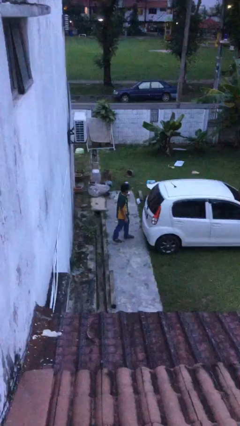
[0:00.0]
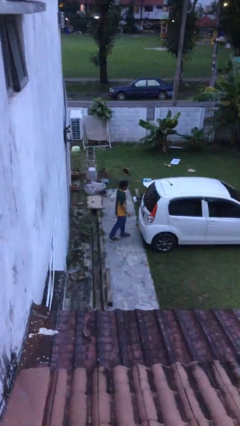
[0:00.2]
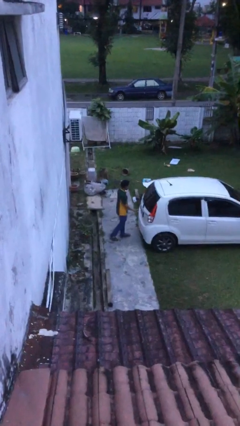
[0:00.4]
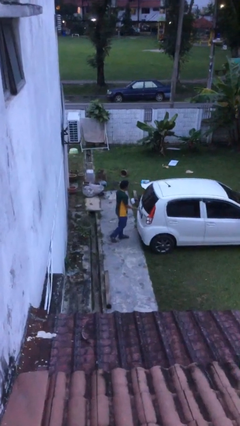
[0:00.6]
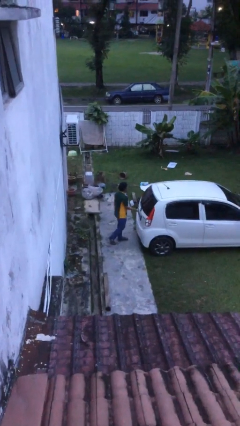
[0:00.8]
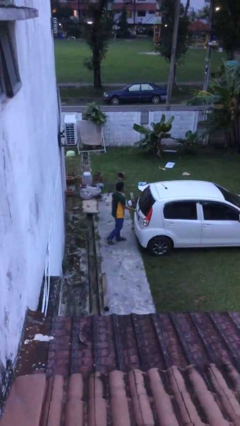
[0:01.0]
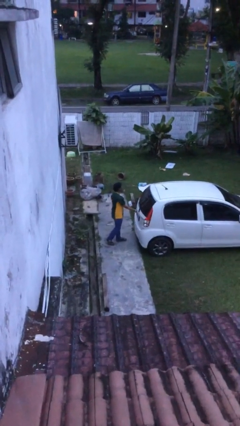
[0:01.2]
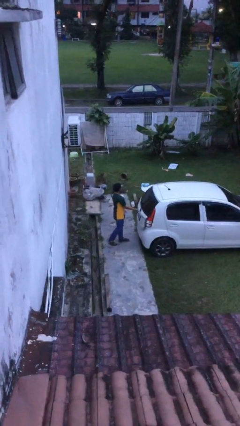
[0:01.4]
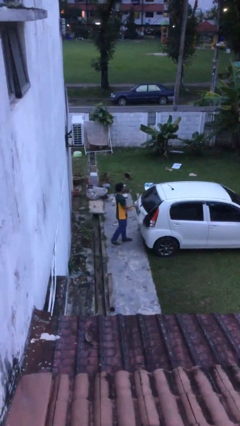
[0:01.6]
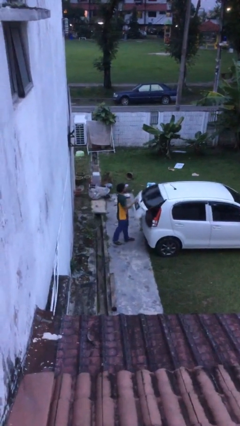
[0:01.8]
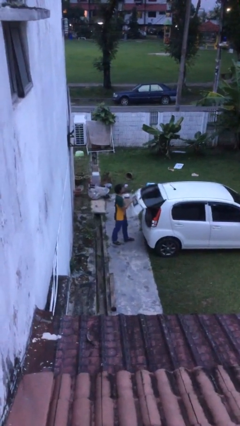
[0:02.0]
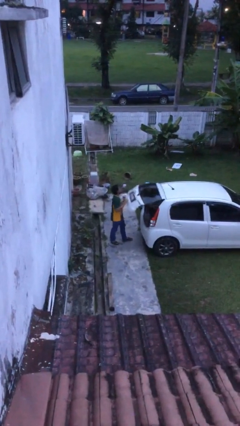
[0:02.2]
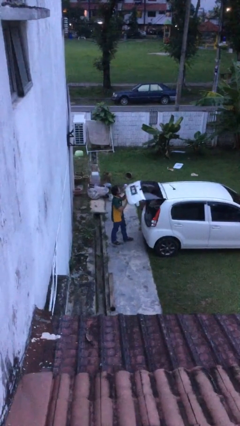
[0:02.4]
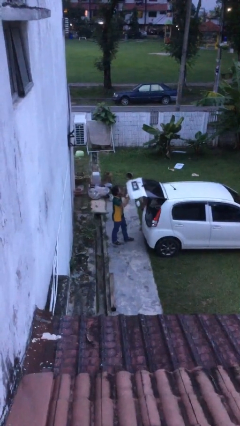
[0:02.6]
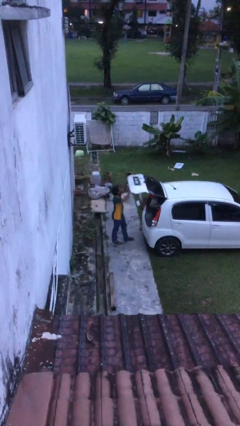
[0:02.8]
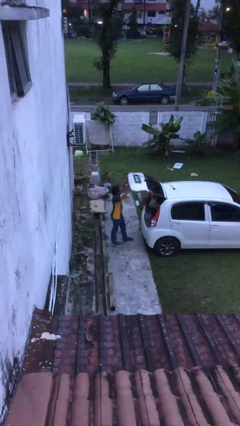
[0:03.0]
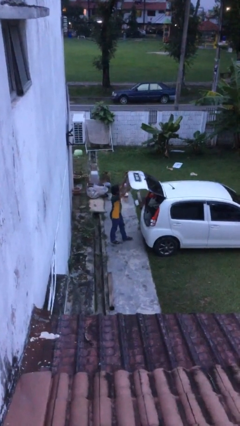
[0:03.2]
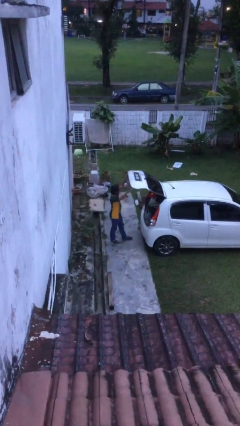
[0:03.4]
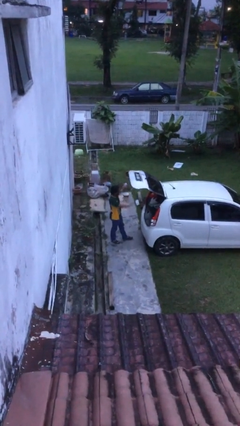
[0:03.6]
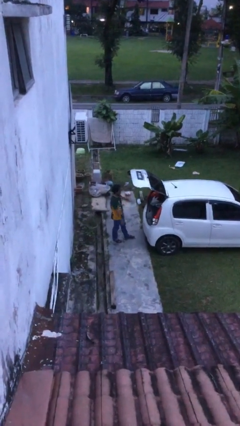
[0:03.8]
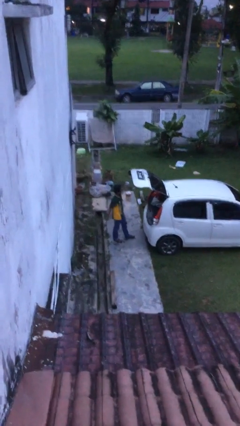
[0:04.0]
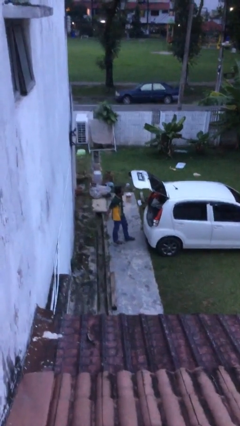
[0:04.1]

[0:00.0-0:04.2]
person opens car trunk

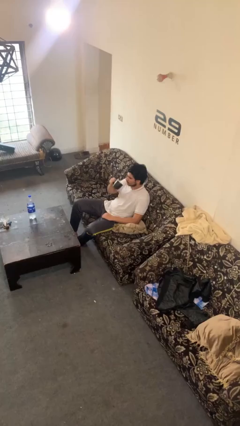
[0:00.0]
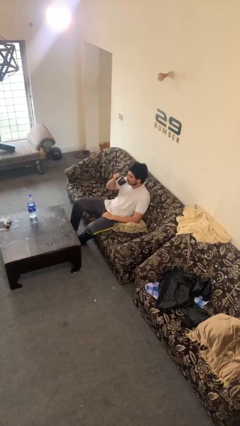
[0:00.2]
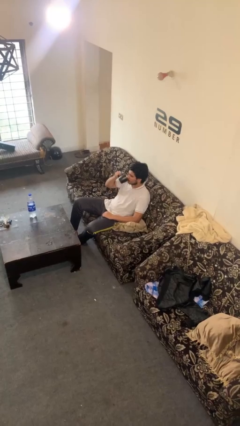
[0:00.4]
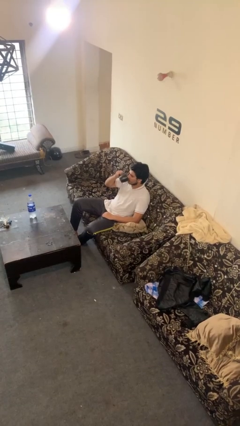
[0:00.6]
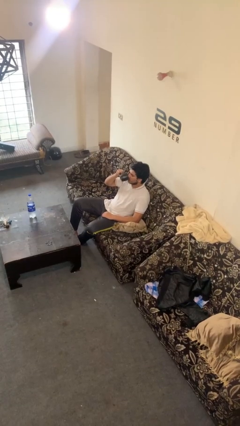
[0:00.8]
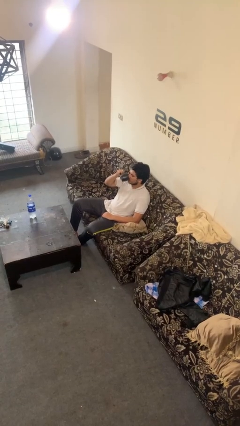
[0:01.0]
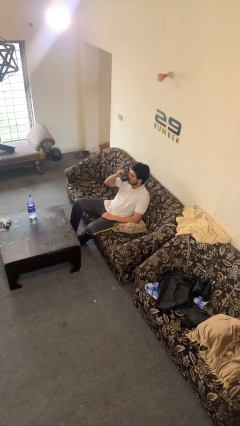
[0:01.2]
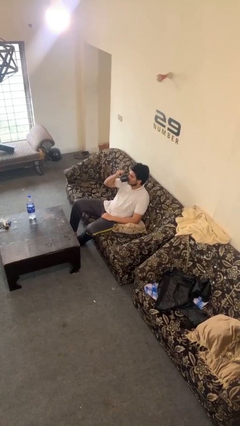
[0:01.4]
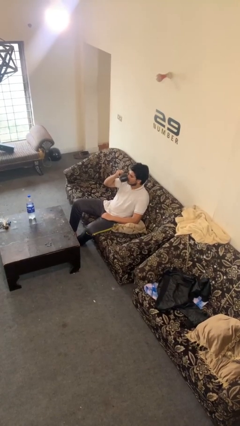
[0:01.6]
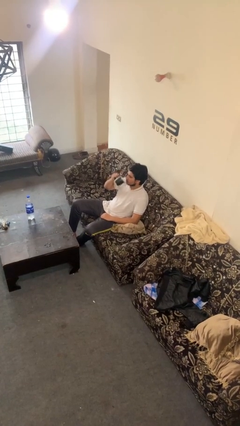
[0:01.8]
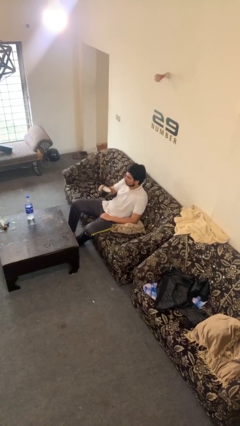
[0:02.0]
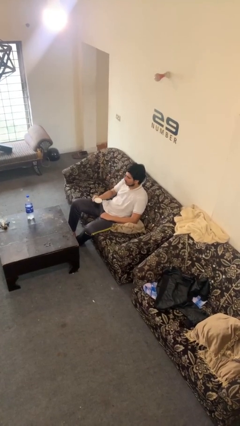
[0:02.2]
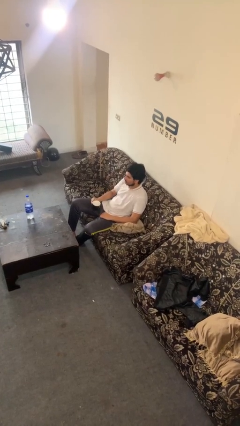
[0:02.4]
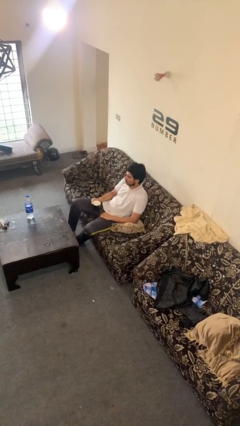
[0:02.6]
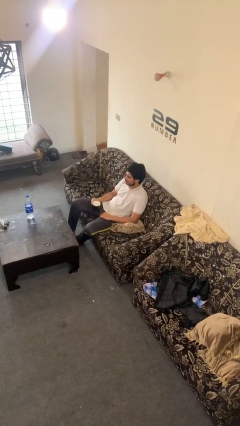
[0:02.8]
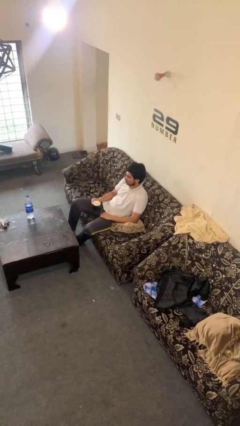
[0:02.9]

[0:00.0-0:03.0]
person drinks from mug

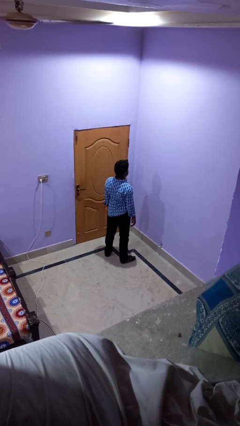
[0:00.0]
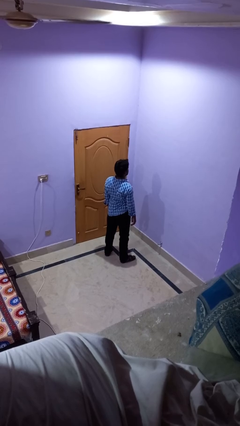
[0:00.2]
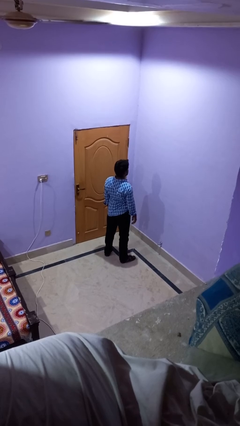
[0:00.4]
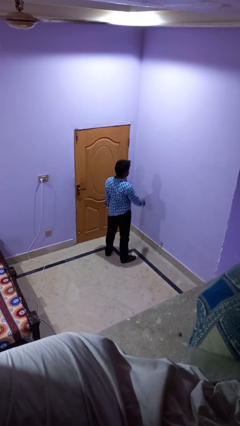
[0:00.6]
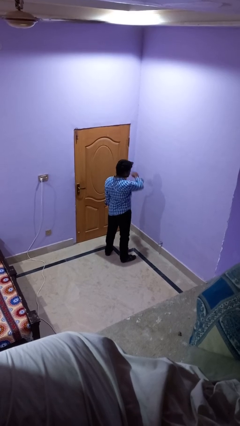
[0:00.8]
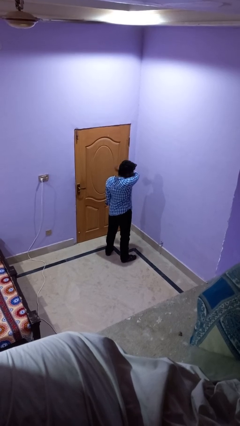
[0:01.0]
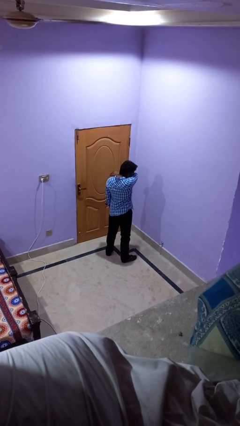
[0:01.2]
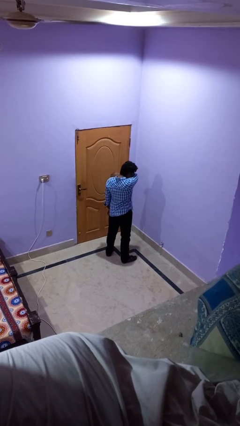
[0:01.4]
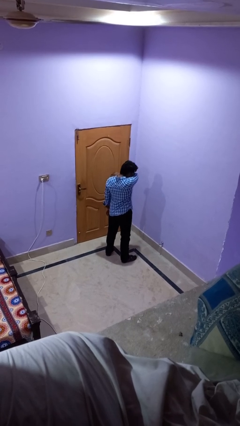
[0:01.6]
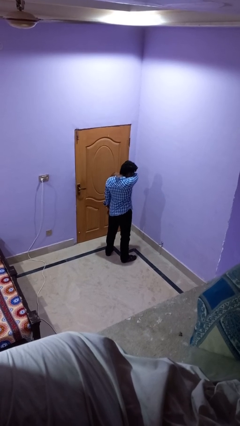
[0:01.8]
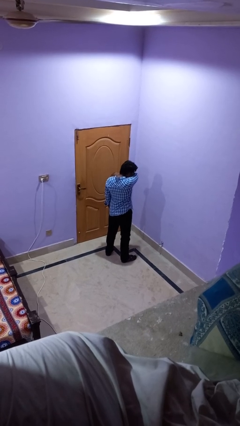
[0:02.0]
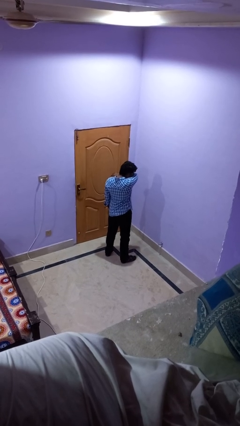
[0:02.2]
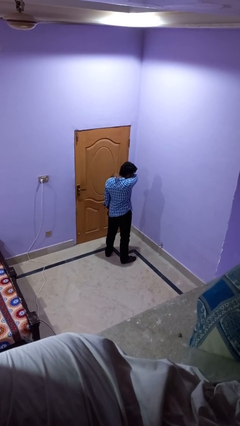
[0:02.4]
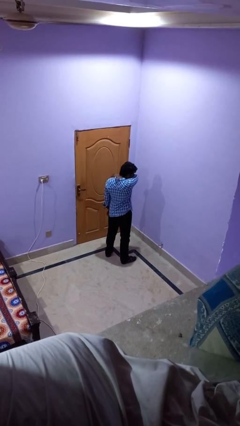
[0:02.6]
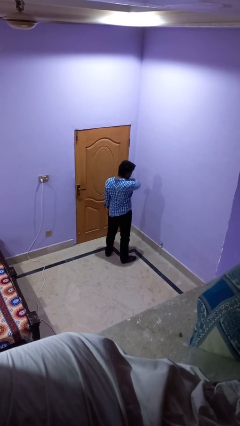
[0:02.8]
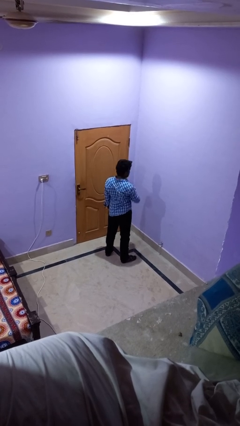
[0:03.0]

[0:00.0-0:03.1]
person sneezes into arm

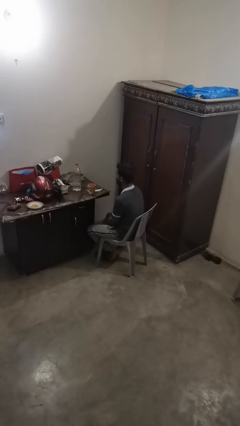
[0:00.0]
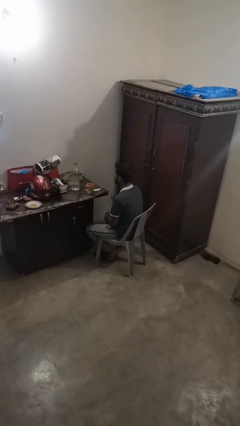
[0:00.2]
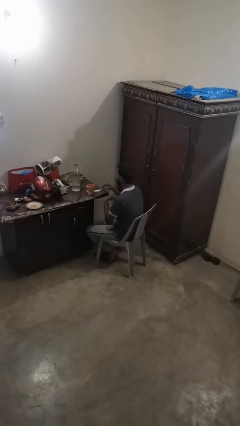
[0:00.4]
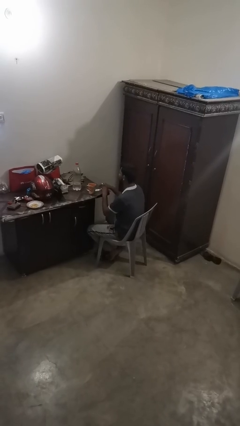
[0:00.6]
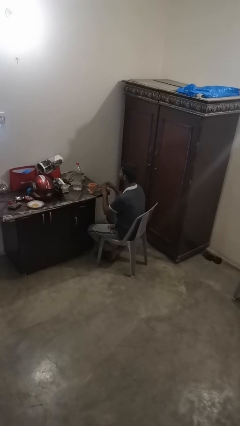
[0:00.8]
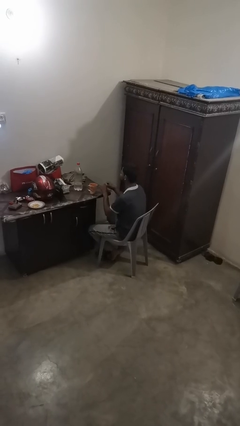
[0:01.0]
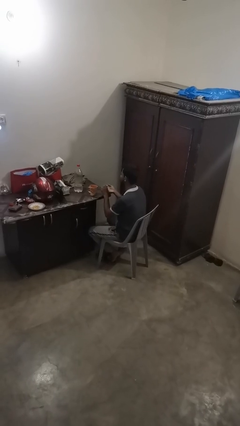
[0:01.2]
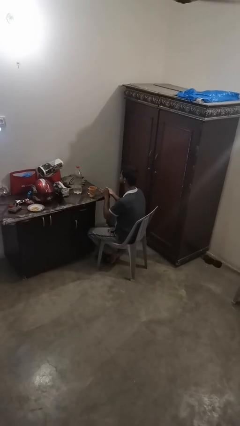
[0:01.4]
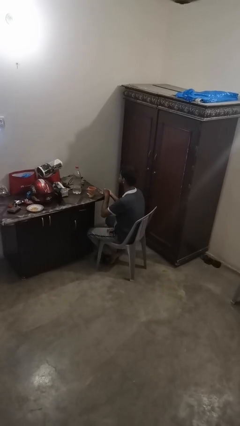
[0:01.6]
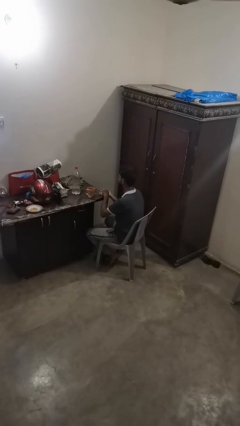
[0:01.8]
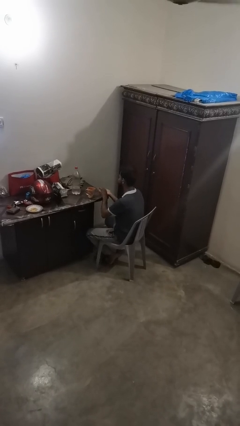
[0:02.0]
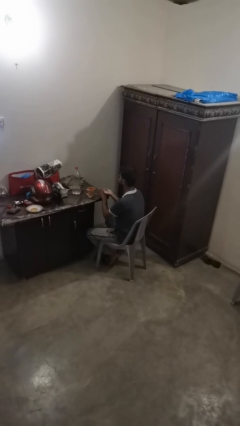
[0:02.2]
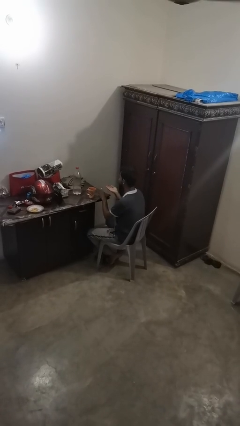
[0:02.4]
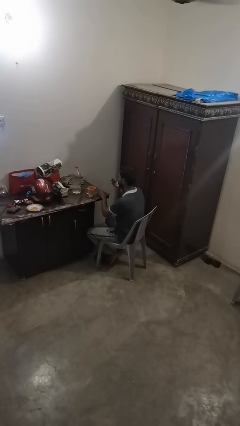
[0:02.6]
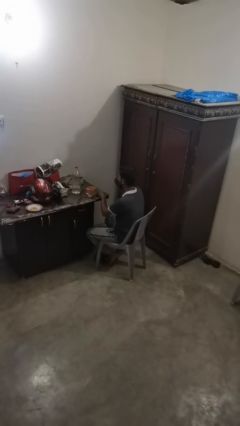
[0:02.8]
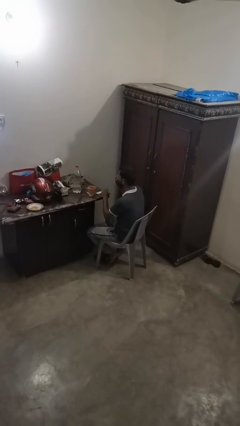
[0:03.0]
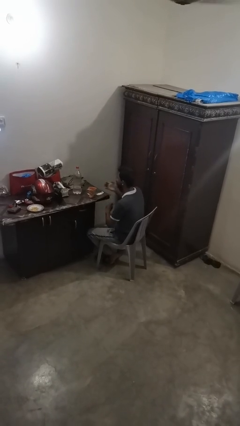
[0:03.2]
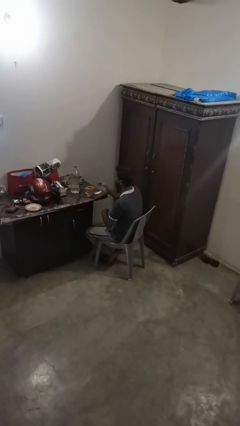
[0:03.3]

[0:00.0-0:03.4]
person takes medicine pills

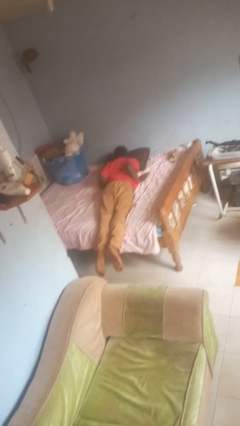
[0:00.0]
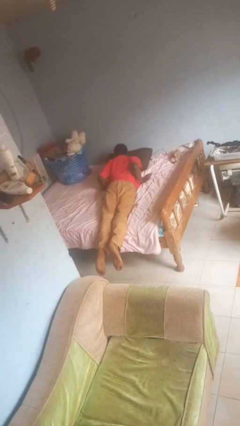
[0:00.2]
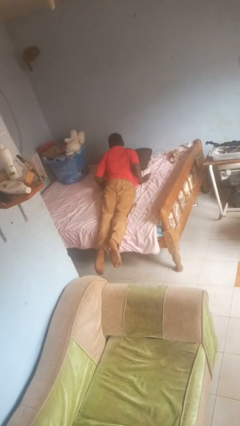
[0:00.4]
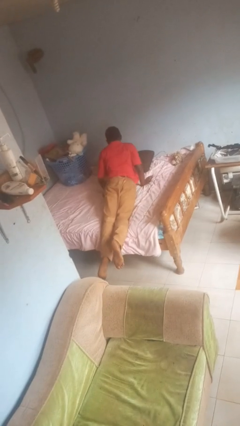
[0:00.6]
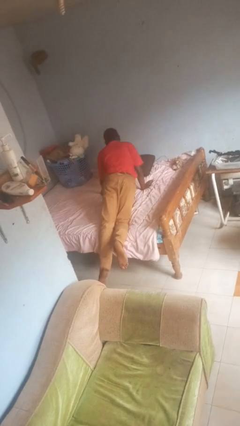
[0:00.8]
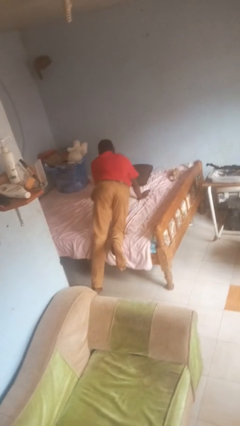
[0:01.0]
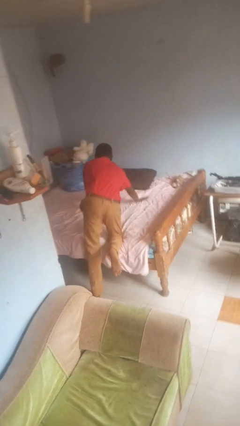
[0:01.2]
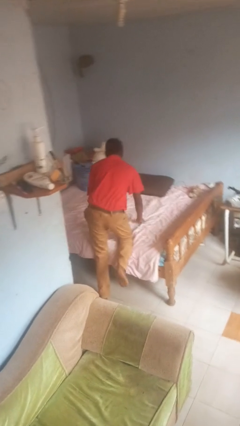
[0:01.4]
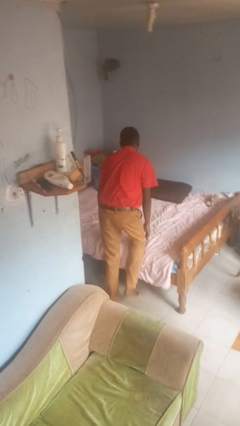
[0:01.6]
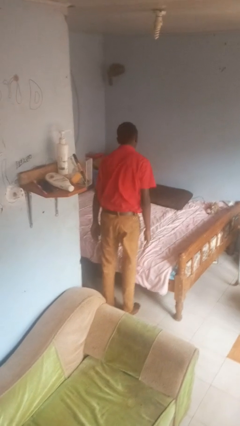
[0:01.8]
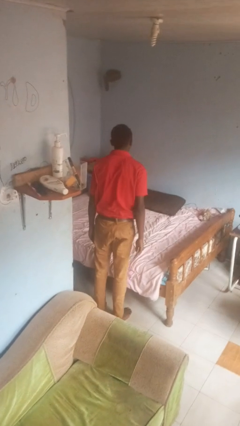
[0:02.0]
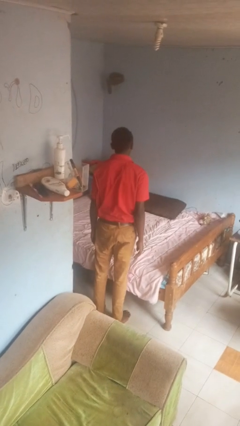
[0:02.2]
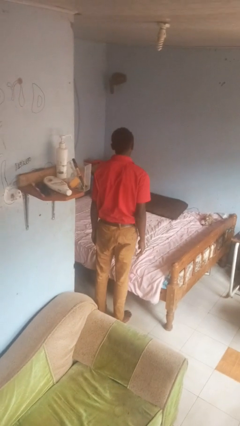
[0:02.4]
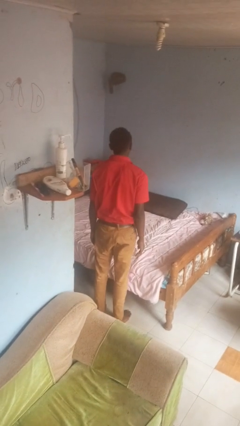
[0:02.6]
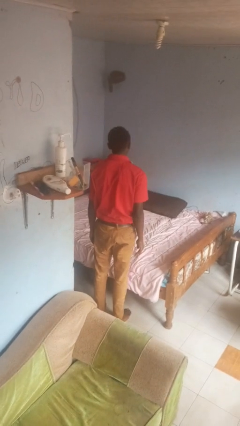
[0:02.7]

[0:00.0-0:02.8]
person stands up

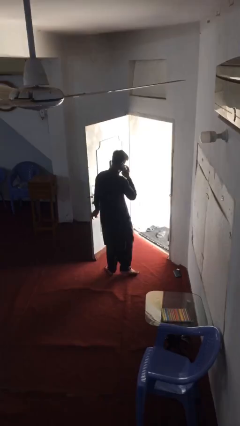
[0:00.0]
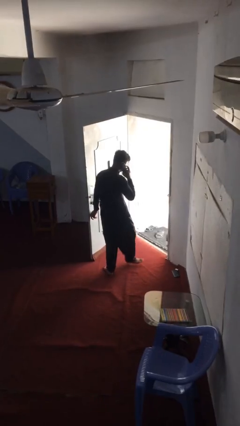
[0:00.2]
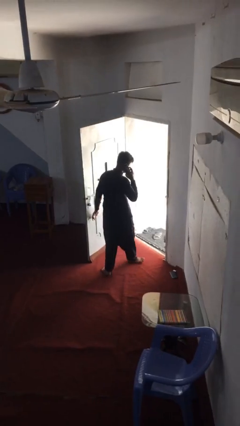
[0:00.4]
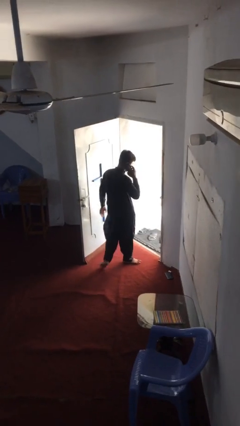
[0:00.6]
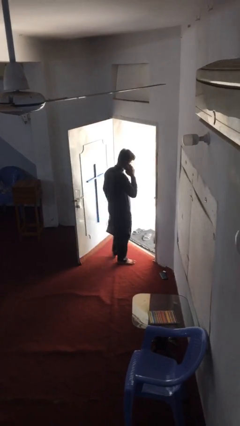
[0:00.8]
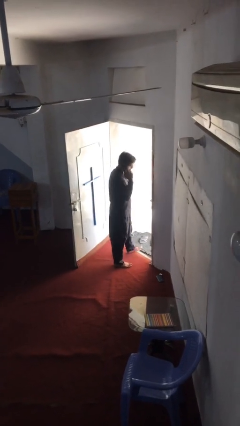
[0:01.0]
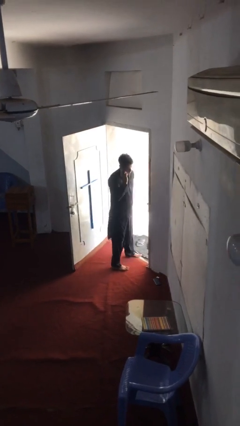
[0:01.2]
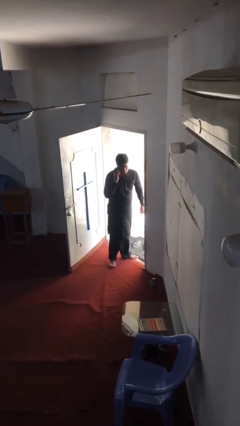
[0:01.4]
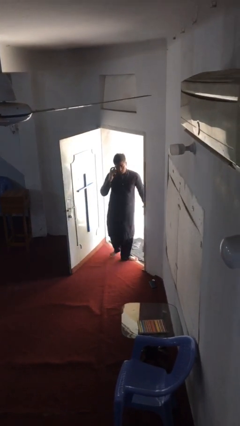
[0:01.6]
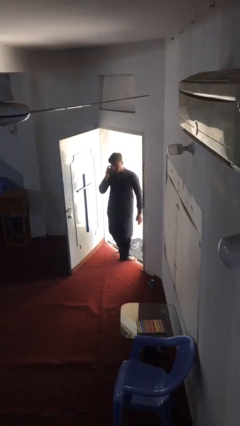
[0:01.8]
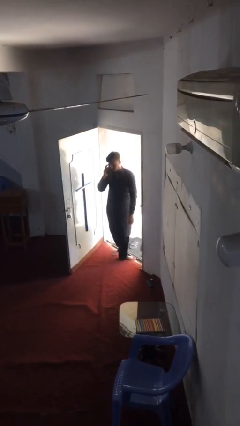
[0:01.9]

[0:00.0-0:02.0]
person exits scene through structure
